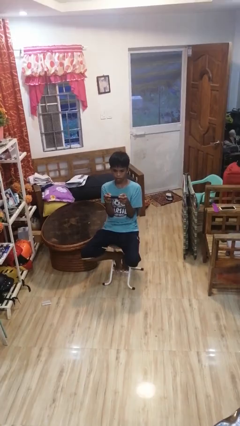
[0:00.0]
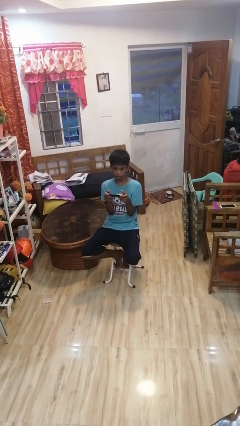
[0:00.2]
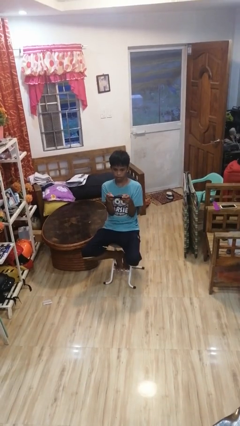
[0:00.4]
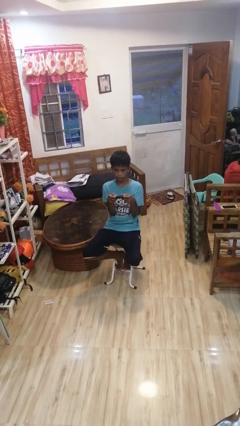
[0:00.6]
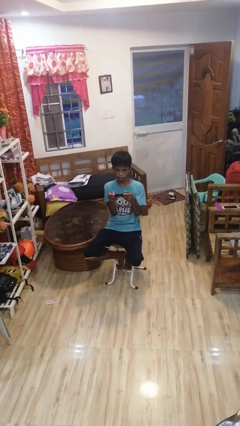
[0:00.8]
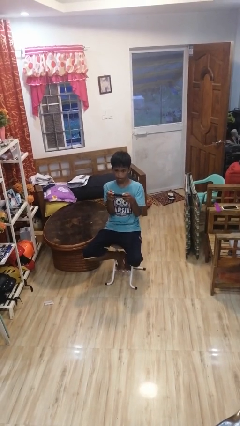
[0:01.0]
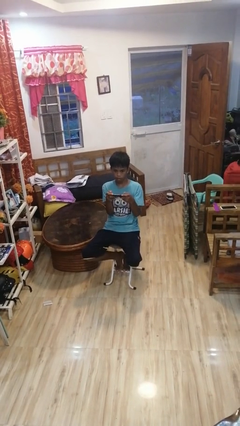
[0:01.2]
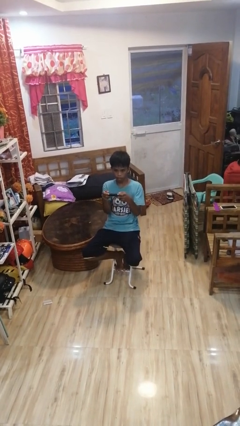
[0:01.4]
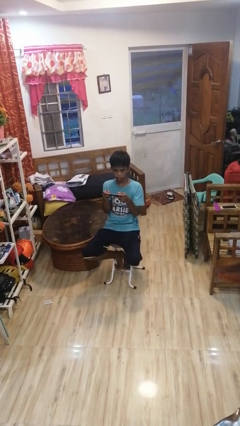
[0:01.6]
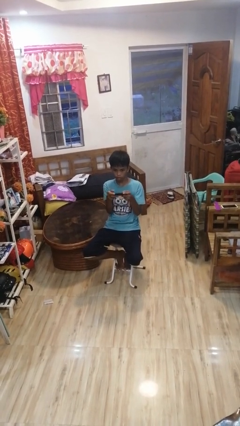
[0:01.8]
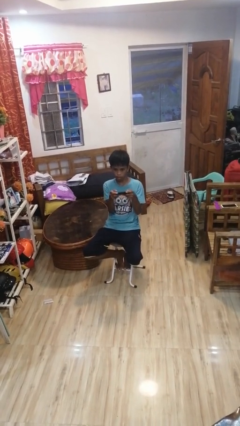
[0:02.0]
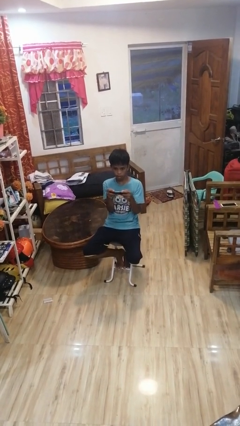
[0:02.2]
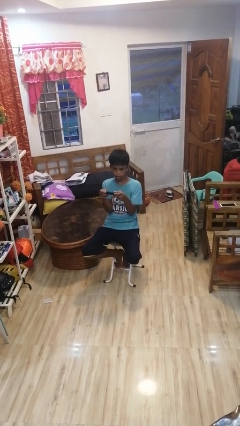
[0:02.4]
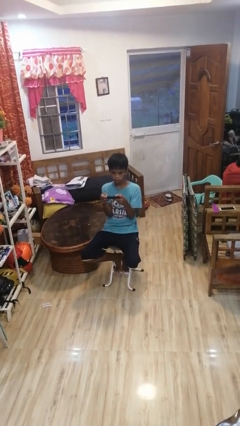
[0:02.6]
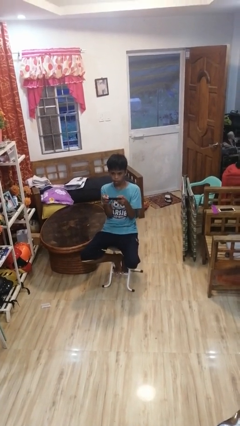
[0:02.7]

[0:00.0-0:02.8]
person interacts with handheld game

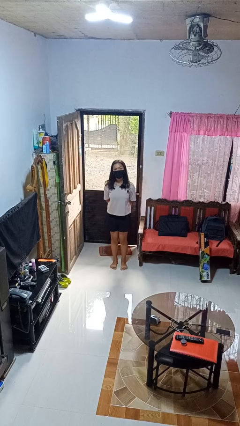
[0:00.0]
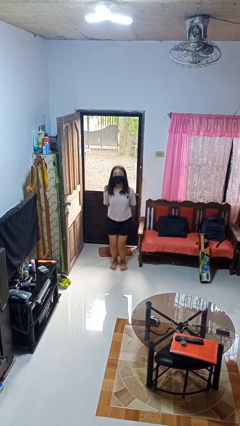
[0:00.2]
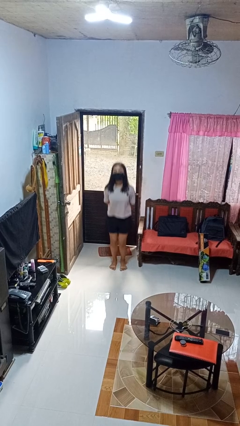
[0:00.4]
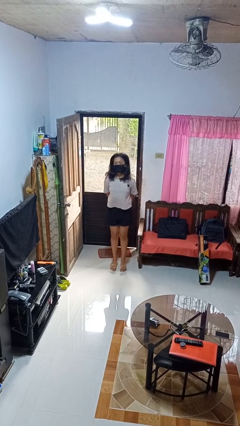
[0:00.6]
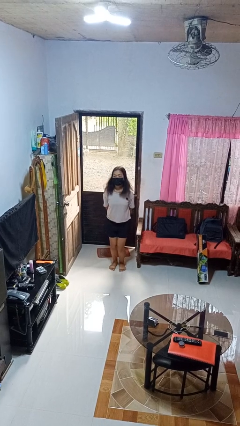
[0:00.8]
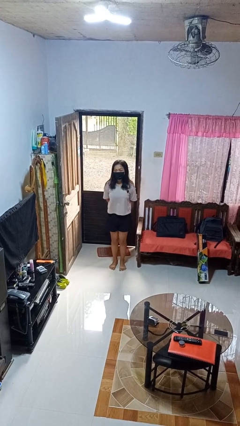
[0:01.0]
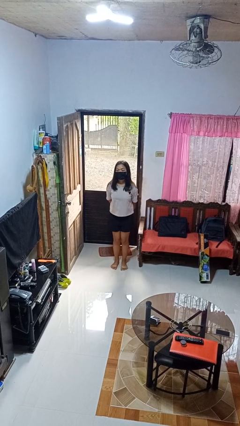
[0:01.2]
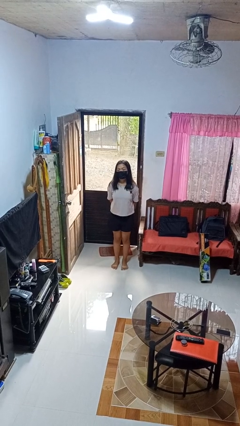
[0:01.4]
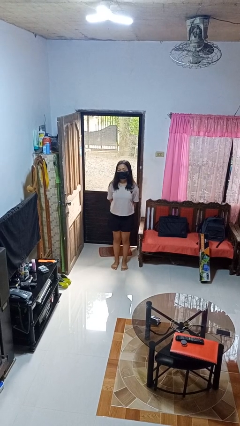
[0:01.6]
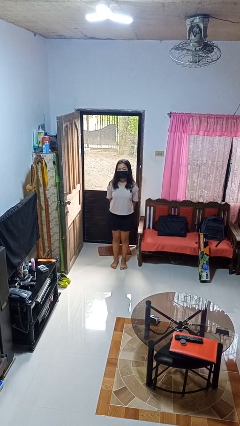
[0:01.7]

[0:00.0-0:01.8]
person jumps

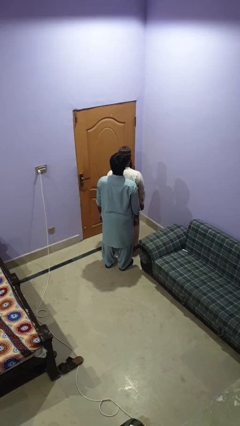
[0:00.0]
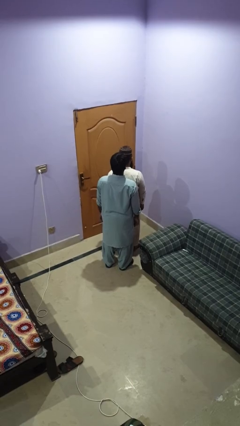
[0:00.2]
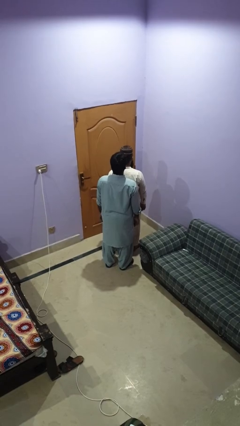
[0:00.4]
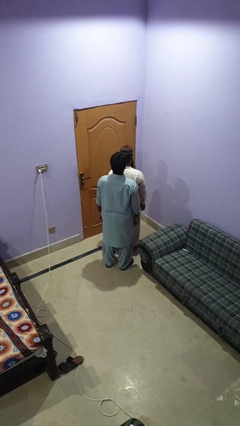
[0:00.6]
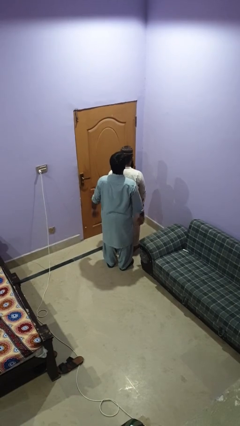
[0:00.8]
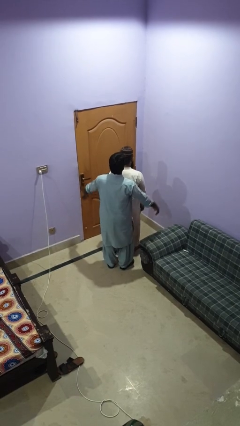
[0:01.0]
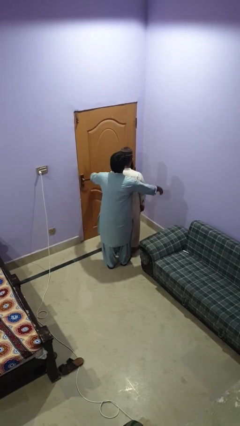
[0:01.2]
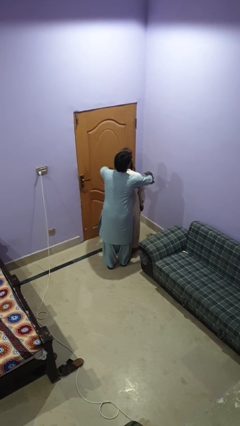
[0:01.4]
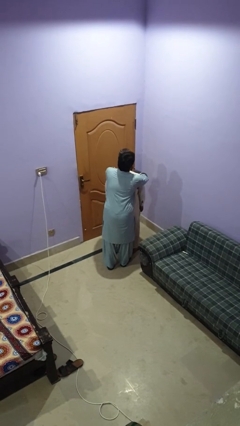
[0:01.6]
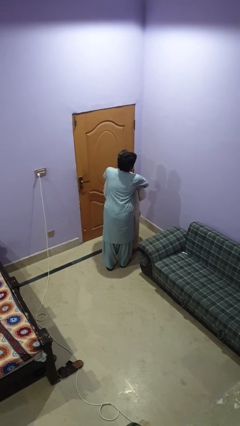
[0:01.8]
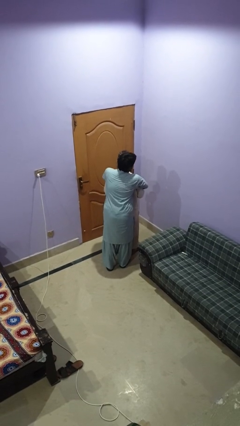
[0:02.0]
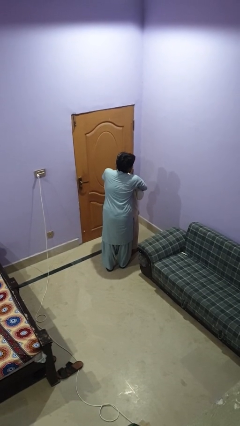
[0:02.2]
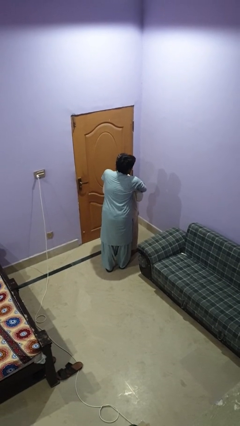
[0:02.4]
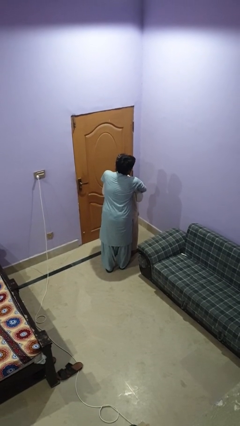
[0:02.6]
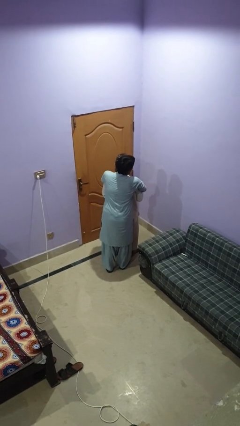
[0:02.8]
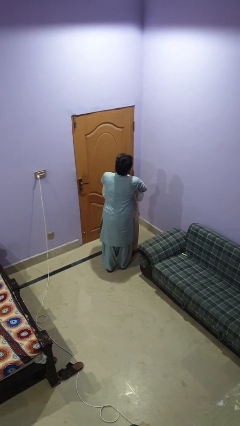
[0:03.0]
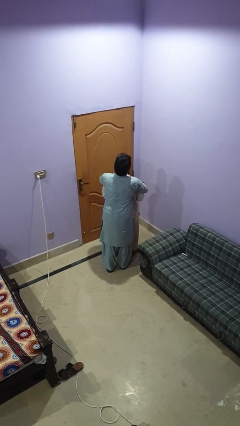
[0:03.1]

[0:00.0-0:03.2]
person hugs person from behind

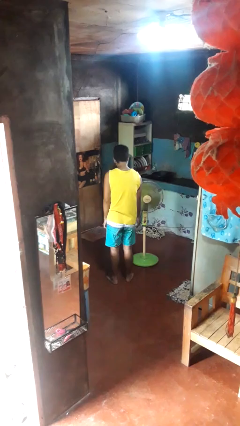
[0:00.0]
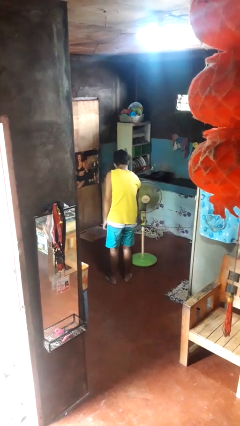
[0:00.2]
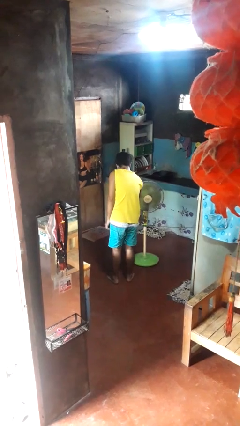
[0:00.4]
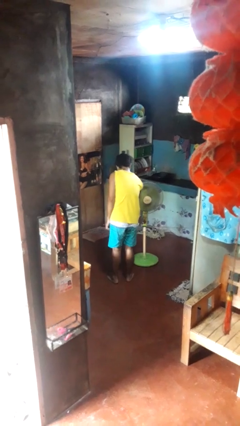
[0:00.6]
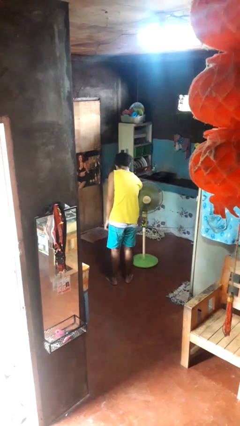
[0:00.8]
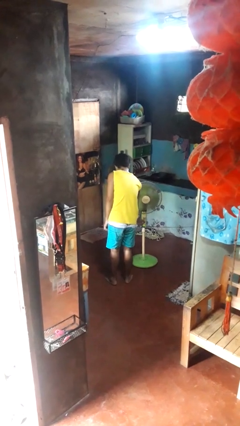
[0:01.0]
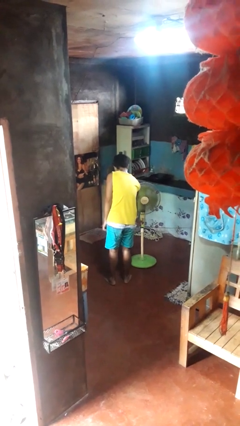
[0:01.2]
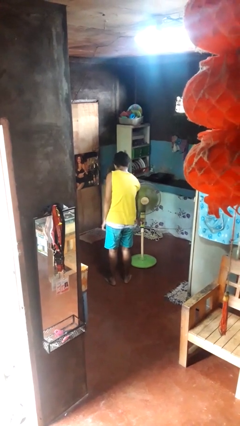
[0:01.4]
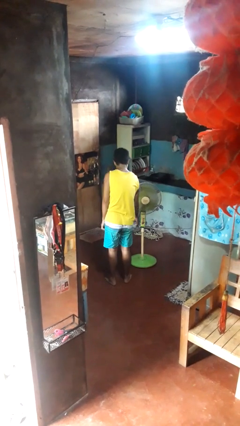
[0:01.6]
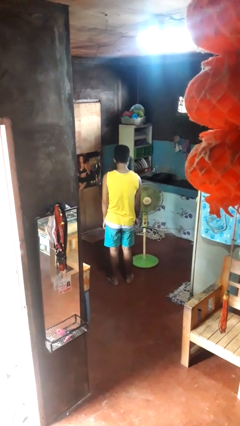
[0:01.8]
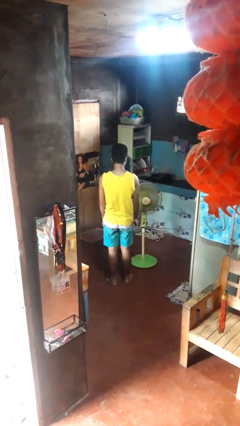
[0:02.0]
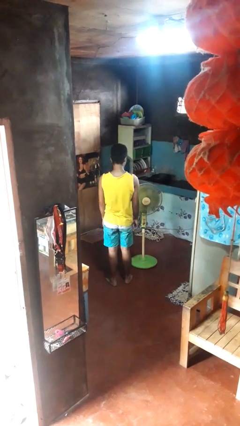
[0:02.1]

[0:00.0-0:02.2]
person turns on fan

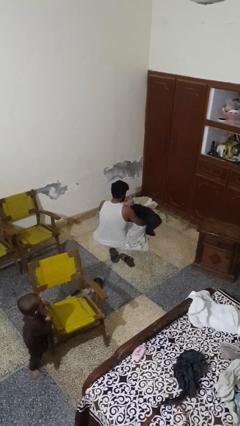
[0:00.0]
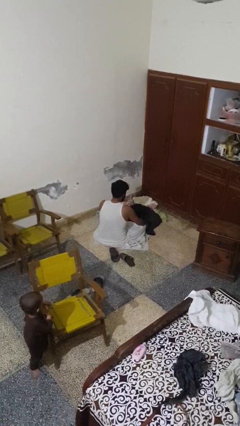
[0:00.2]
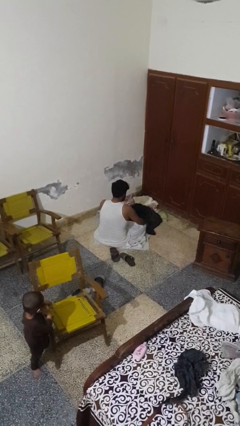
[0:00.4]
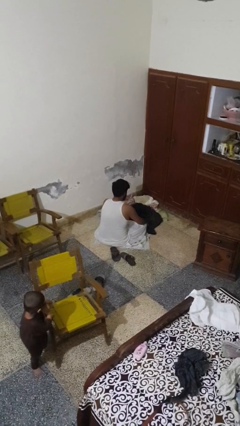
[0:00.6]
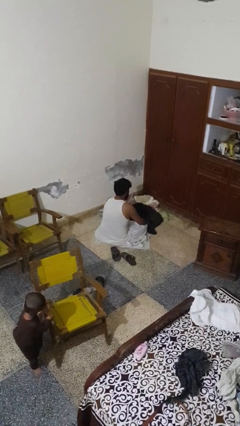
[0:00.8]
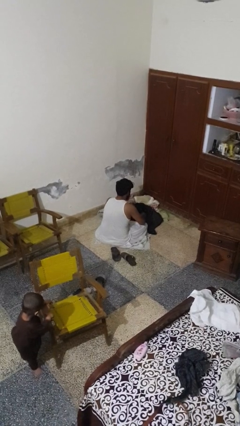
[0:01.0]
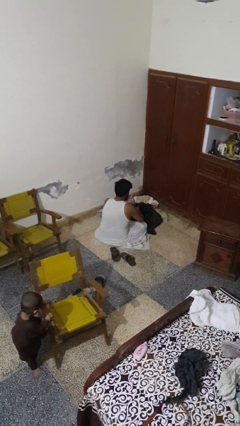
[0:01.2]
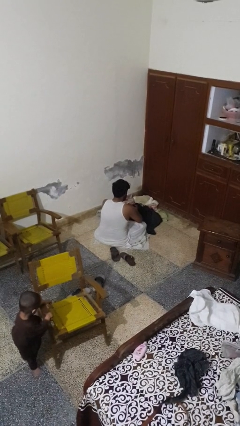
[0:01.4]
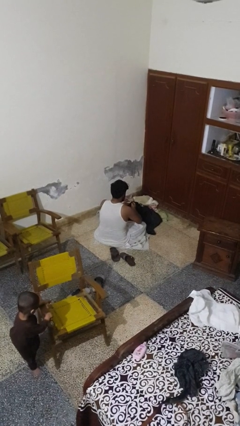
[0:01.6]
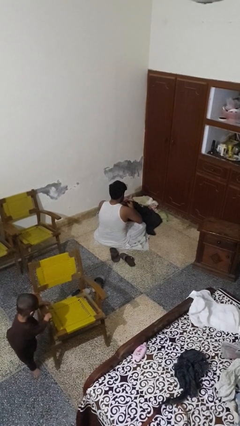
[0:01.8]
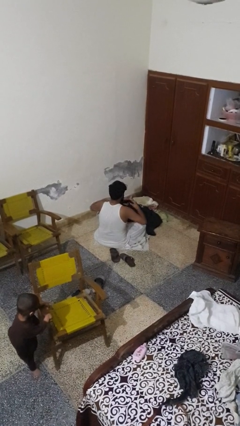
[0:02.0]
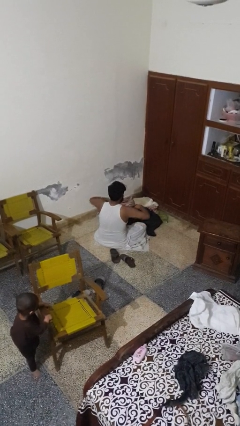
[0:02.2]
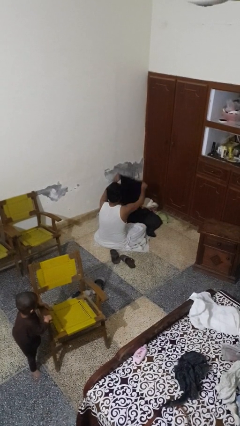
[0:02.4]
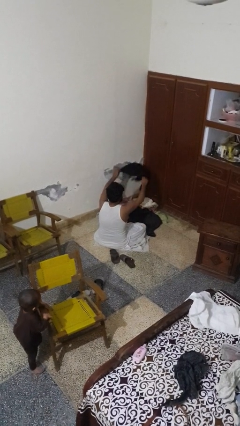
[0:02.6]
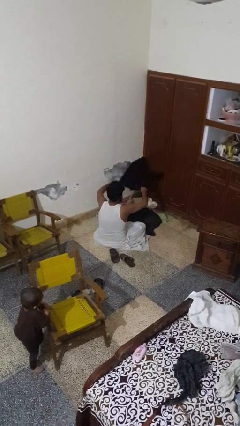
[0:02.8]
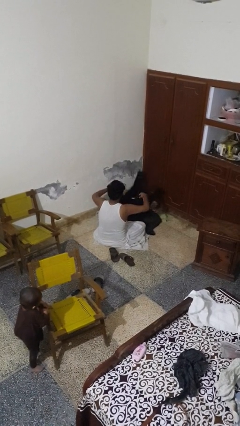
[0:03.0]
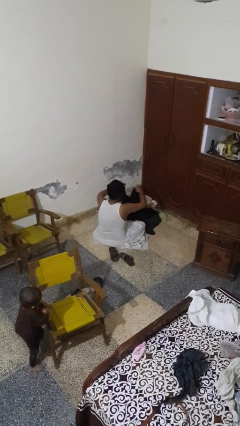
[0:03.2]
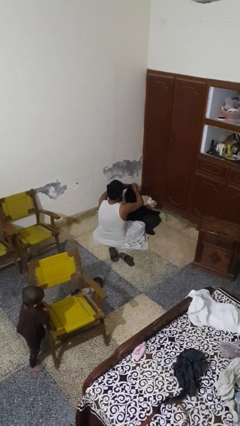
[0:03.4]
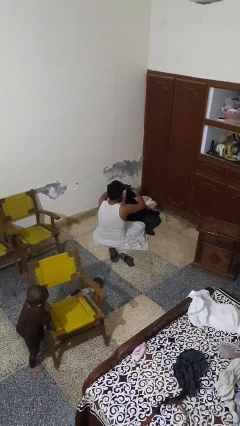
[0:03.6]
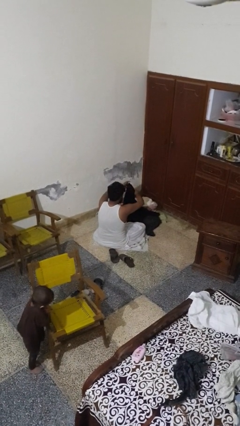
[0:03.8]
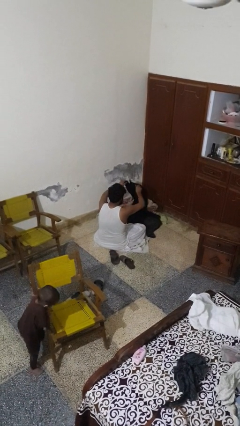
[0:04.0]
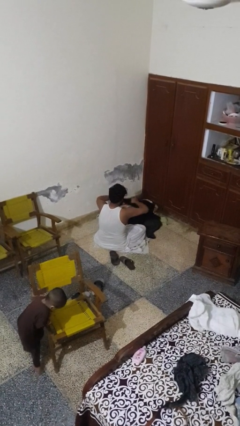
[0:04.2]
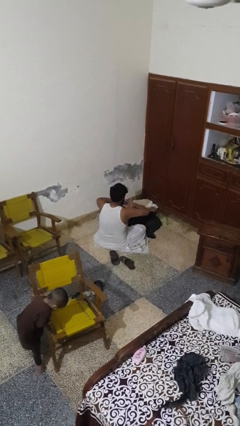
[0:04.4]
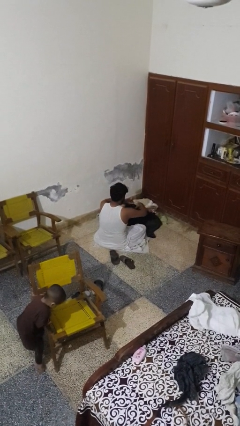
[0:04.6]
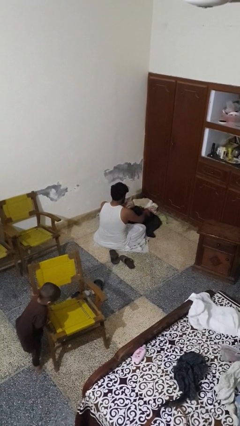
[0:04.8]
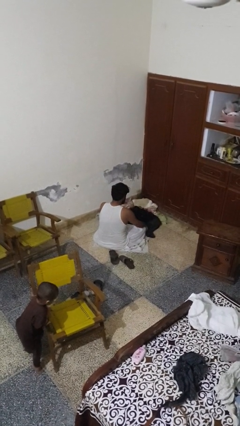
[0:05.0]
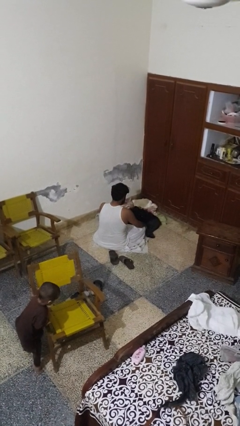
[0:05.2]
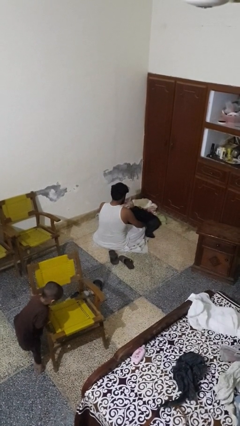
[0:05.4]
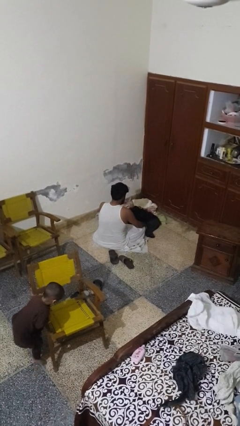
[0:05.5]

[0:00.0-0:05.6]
person folds pants

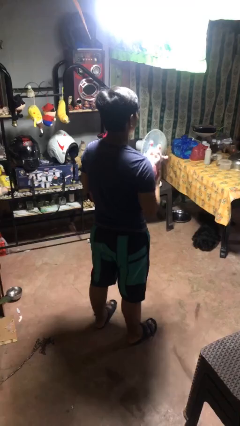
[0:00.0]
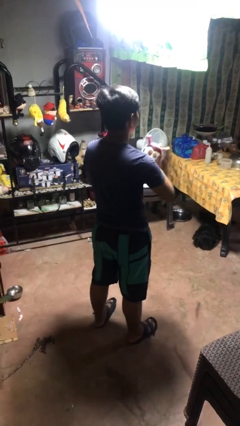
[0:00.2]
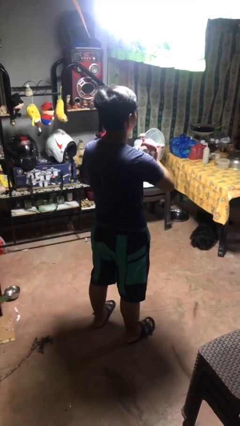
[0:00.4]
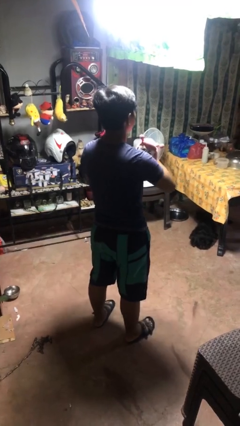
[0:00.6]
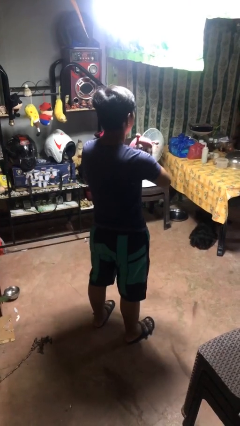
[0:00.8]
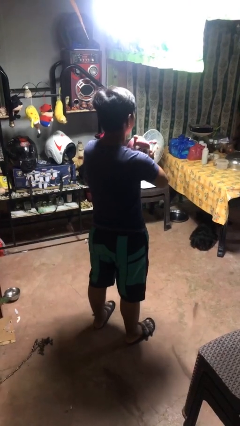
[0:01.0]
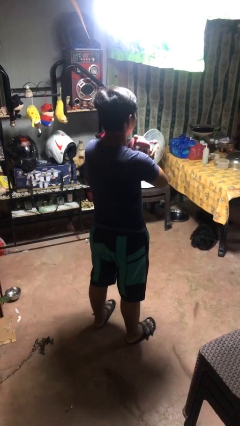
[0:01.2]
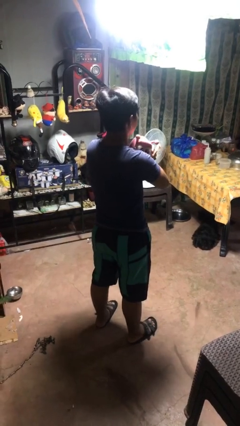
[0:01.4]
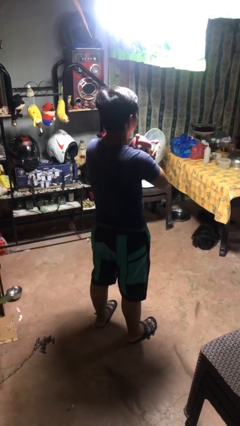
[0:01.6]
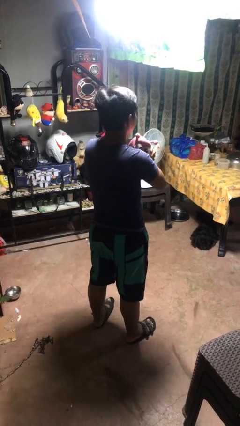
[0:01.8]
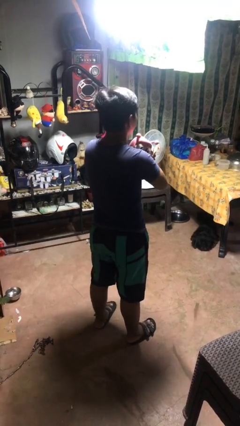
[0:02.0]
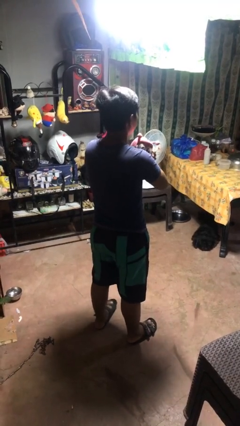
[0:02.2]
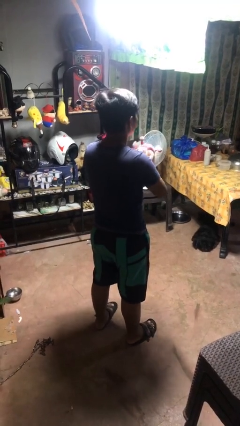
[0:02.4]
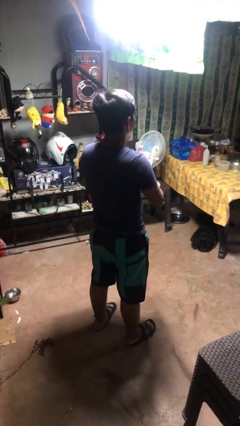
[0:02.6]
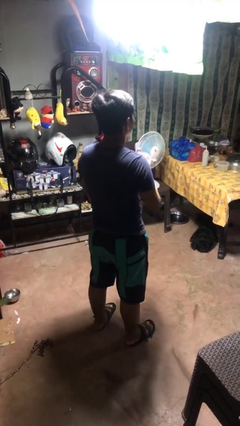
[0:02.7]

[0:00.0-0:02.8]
person hugs stuffed animal
